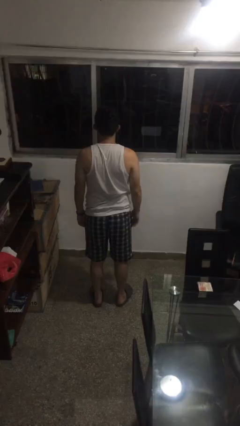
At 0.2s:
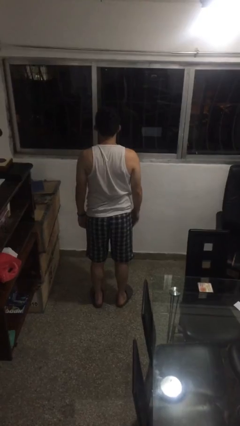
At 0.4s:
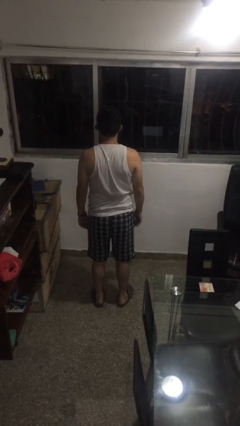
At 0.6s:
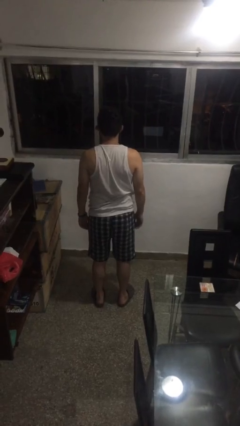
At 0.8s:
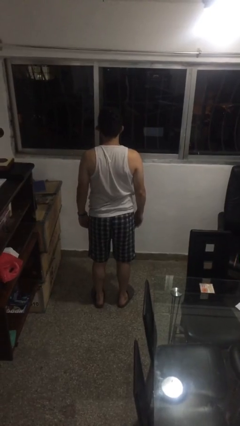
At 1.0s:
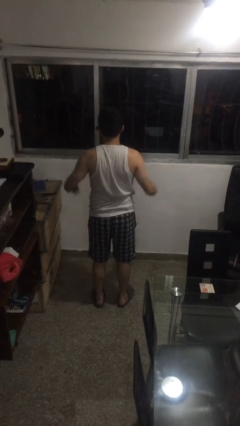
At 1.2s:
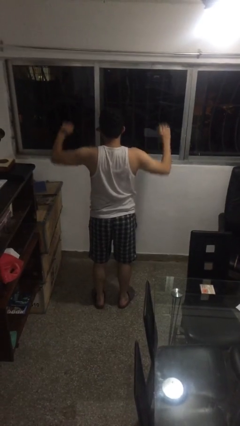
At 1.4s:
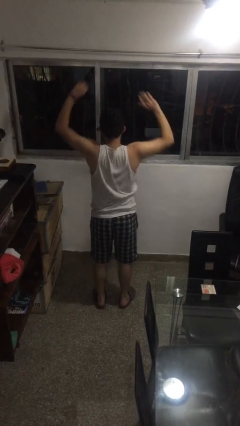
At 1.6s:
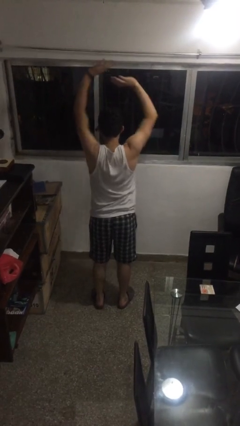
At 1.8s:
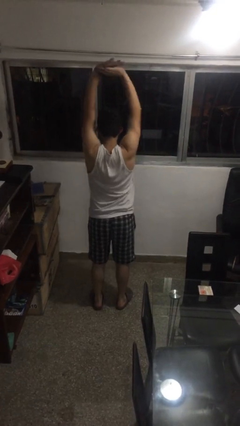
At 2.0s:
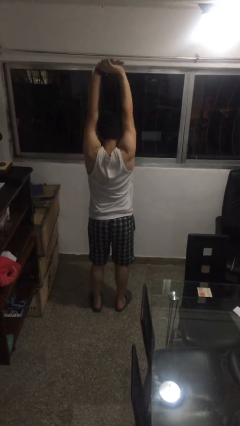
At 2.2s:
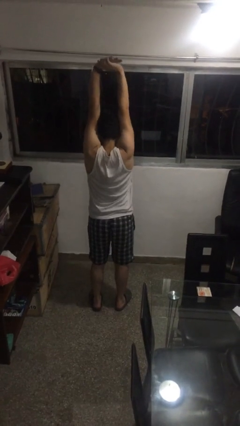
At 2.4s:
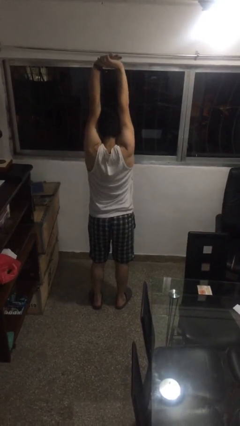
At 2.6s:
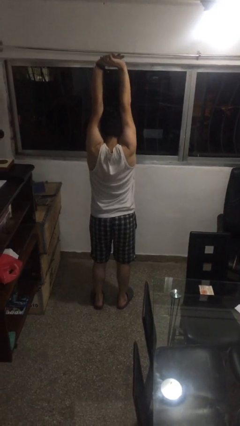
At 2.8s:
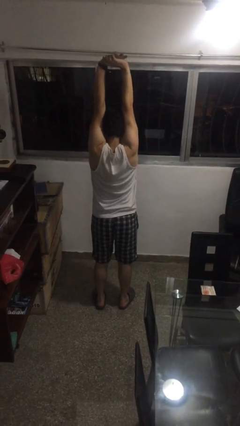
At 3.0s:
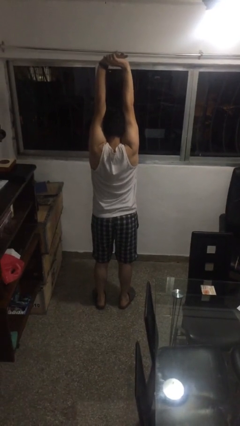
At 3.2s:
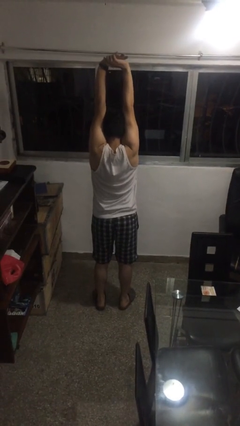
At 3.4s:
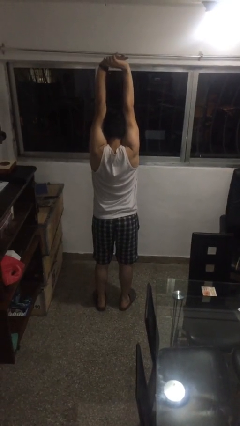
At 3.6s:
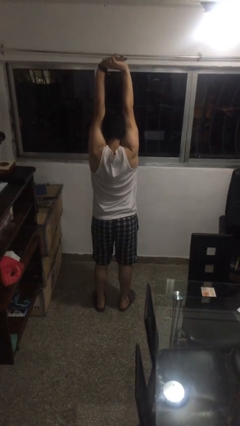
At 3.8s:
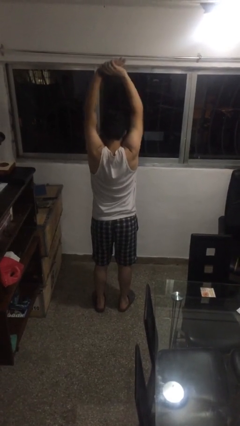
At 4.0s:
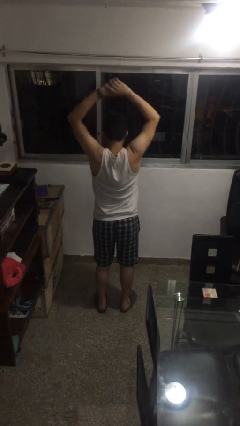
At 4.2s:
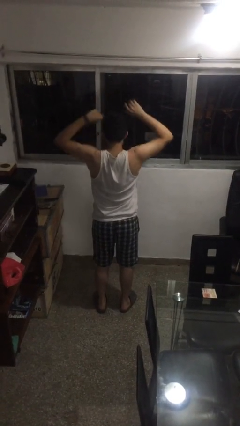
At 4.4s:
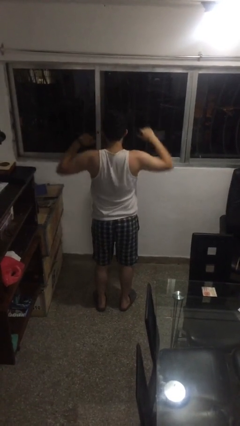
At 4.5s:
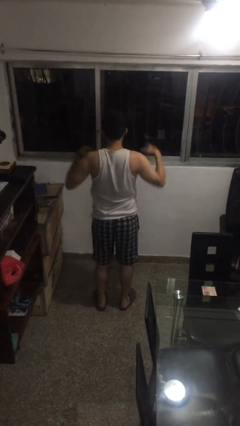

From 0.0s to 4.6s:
person stretches arms over head

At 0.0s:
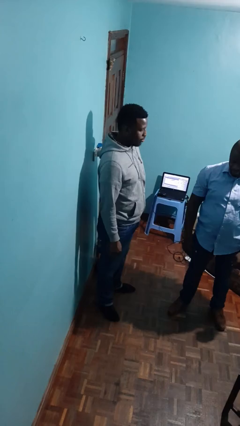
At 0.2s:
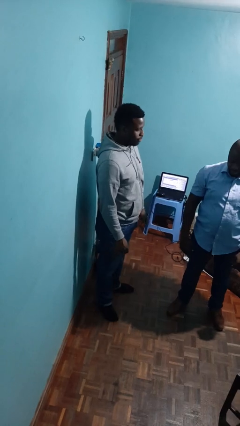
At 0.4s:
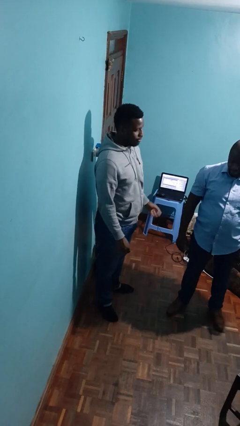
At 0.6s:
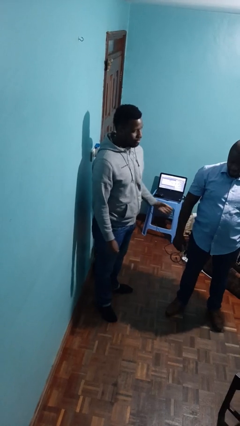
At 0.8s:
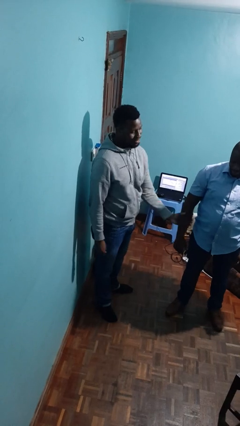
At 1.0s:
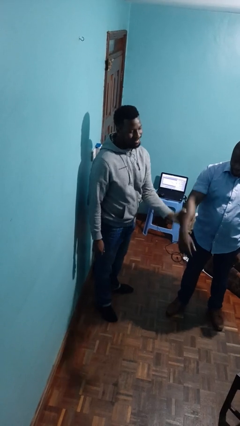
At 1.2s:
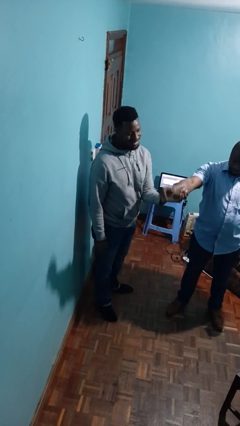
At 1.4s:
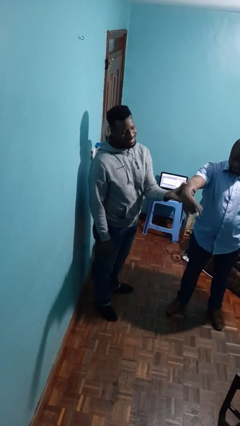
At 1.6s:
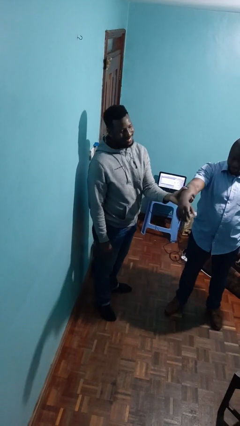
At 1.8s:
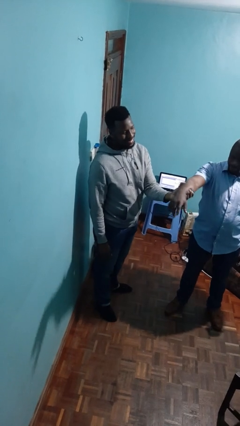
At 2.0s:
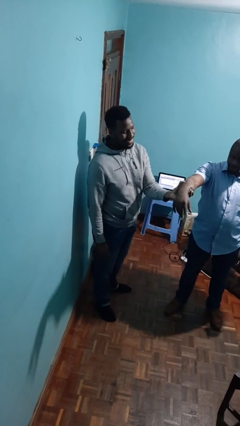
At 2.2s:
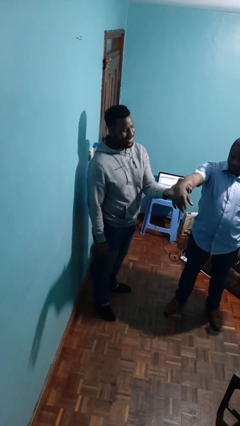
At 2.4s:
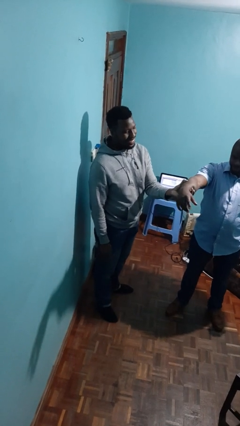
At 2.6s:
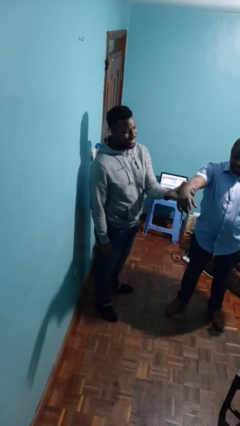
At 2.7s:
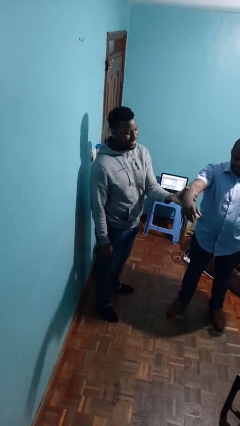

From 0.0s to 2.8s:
person grabs person by forearm

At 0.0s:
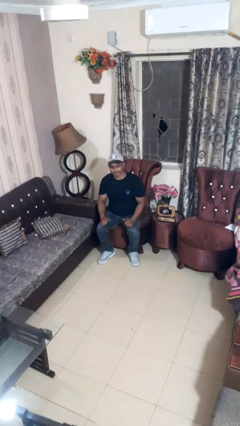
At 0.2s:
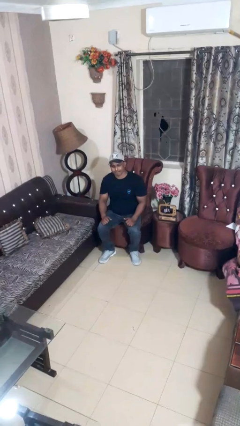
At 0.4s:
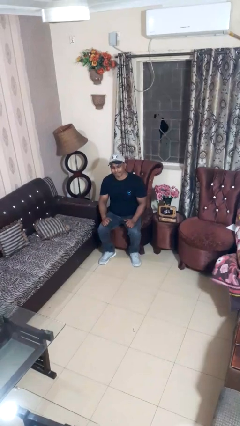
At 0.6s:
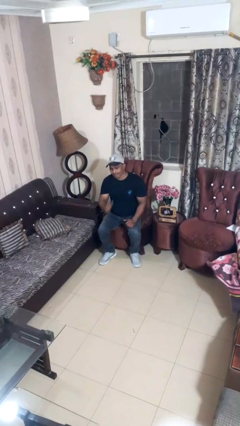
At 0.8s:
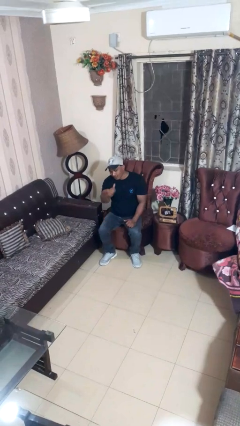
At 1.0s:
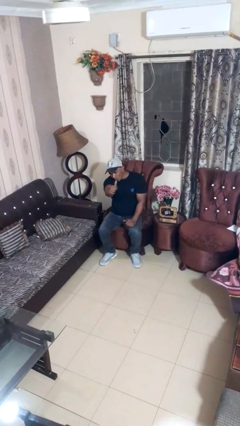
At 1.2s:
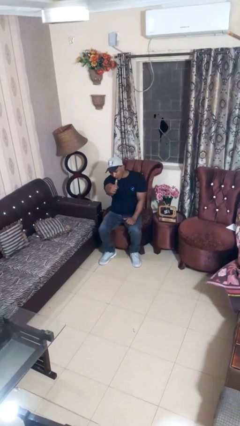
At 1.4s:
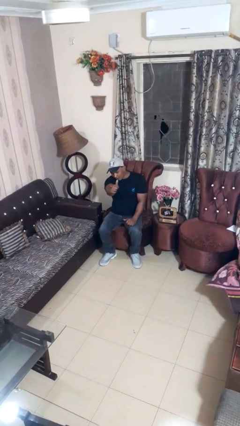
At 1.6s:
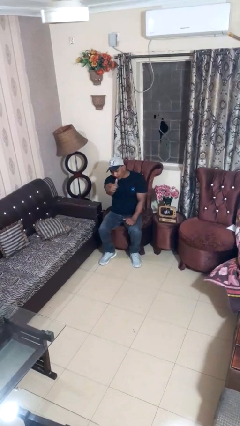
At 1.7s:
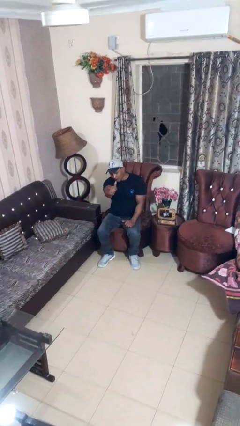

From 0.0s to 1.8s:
person gestures thumbs up

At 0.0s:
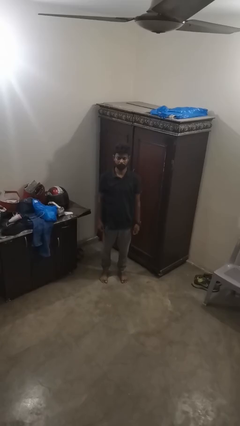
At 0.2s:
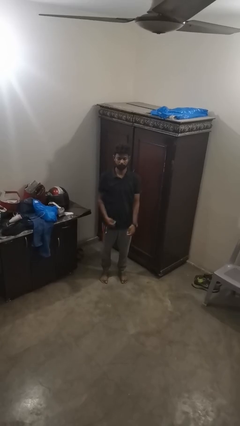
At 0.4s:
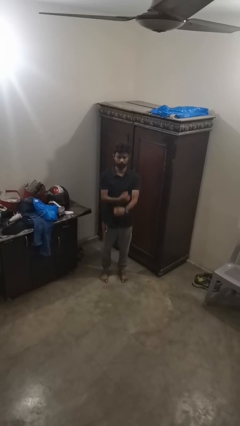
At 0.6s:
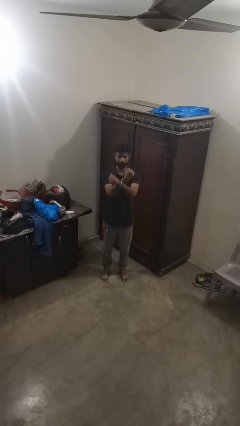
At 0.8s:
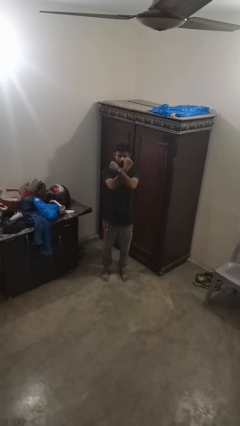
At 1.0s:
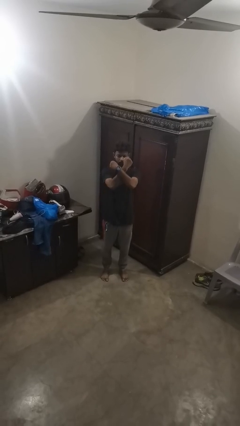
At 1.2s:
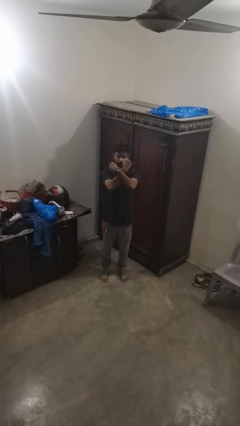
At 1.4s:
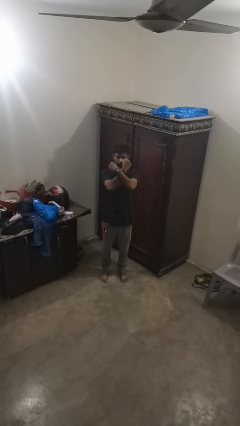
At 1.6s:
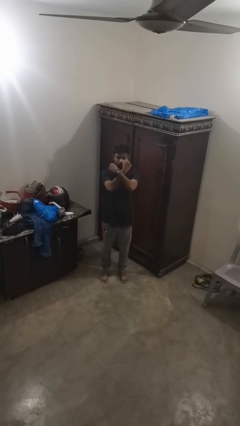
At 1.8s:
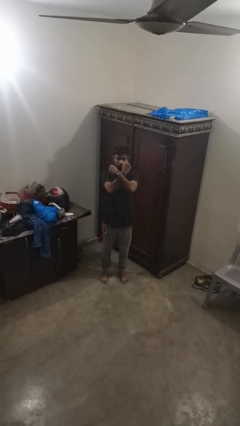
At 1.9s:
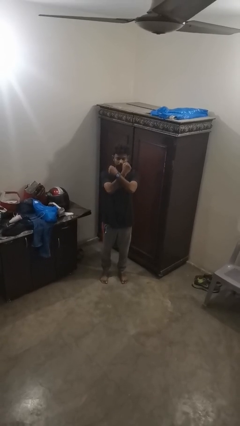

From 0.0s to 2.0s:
person gestures arms x

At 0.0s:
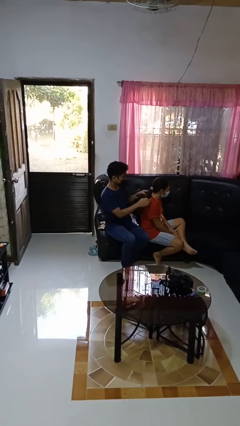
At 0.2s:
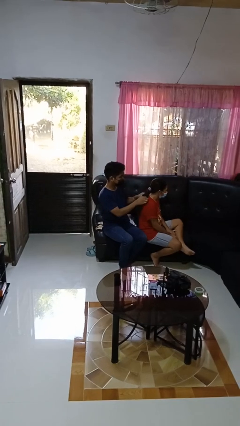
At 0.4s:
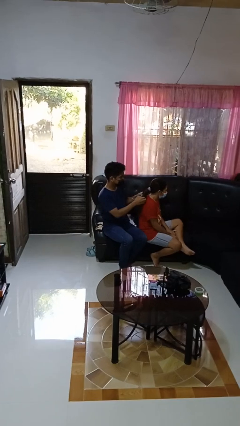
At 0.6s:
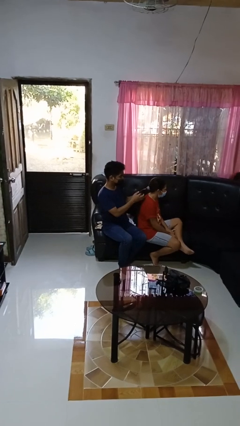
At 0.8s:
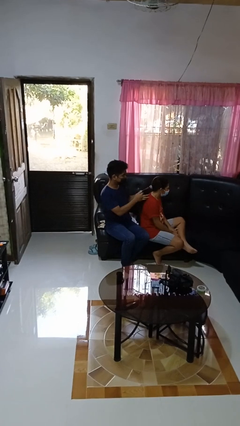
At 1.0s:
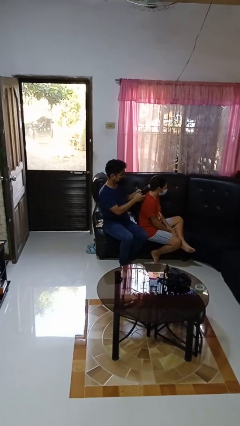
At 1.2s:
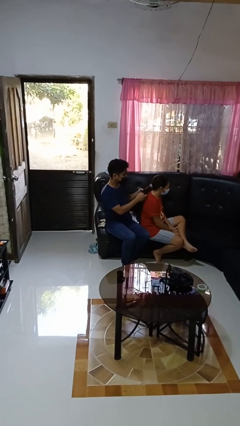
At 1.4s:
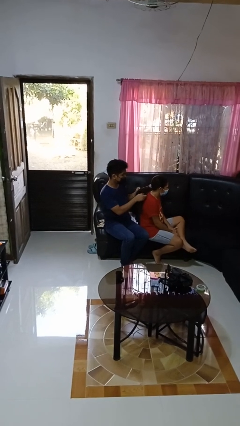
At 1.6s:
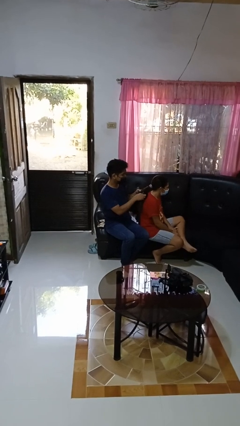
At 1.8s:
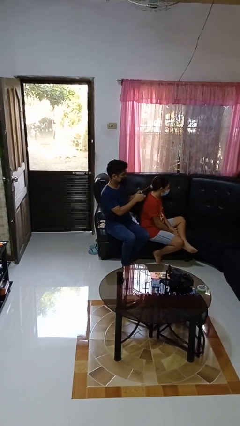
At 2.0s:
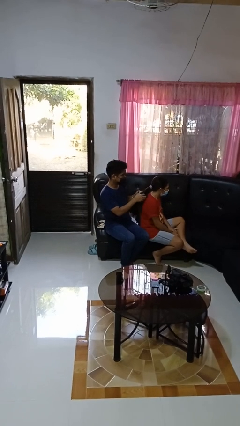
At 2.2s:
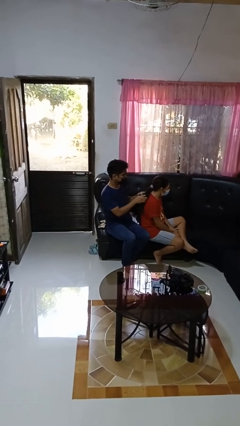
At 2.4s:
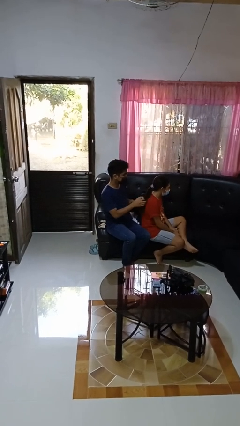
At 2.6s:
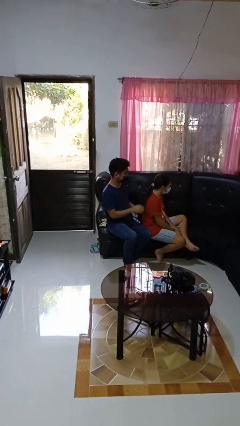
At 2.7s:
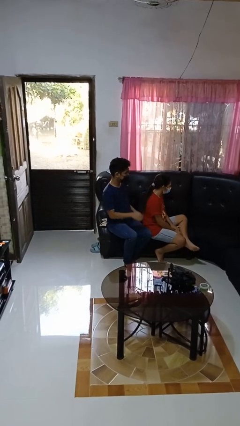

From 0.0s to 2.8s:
person braids hair of person

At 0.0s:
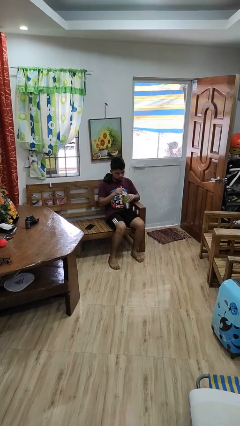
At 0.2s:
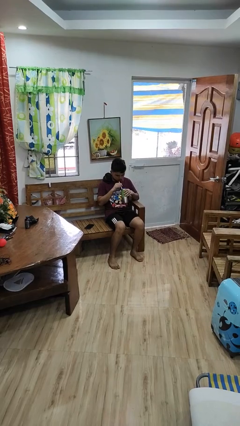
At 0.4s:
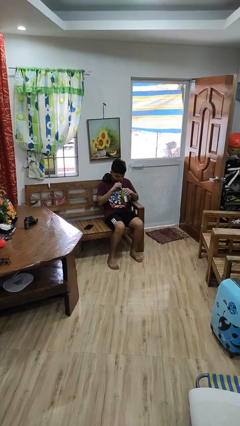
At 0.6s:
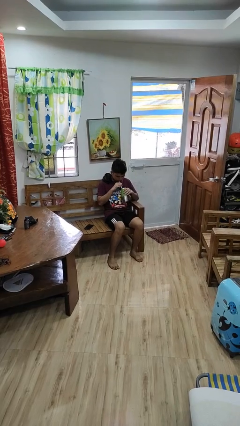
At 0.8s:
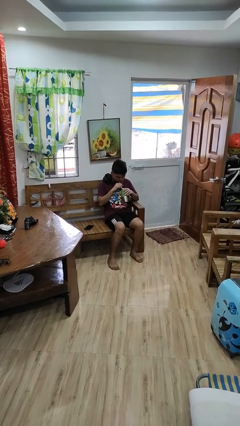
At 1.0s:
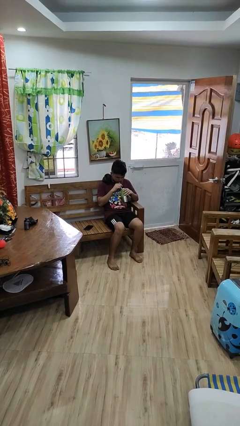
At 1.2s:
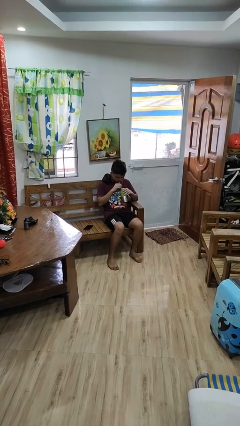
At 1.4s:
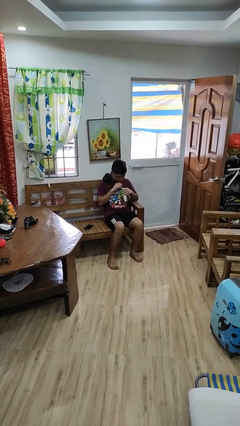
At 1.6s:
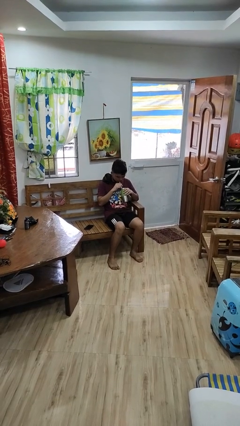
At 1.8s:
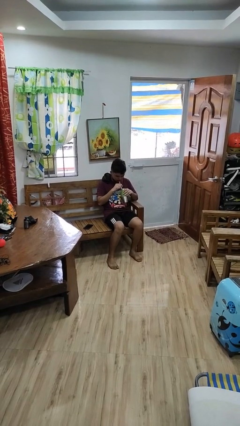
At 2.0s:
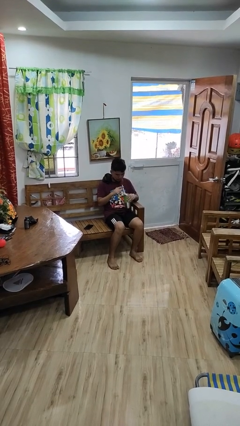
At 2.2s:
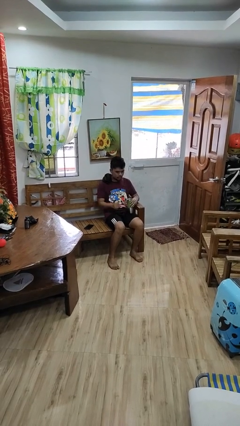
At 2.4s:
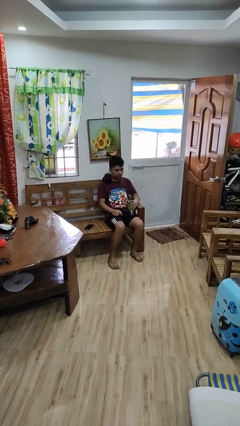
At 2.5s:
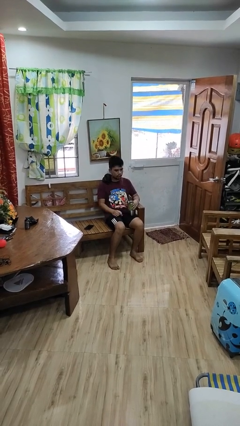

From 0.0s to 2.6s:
person drinks from straw

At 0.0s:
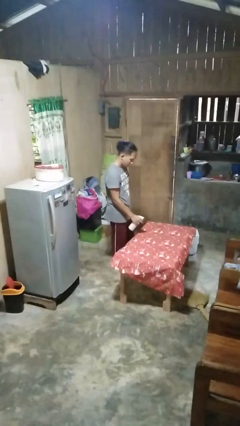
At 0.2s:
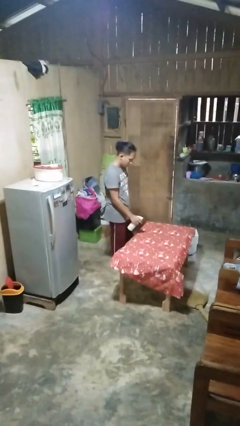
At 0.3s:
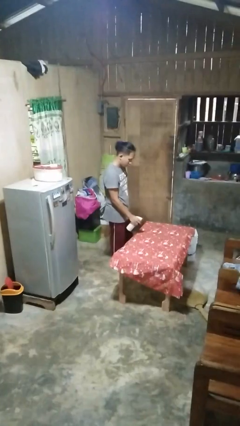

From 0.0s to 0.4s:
person sprays from bottle
